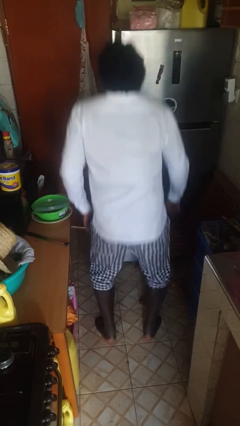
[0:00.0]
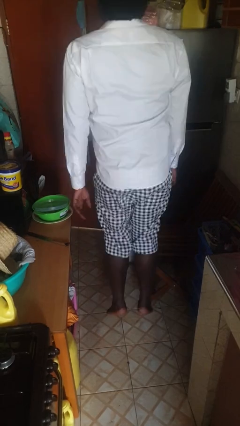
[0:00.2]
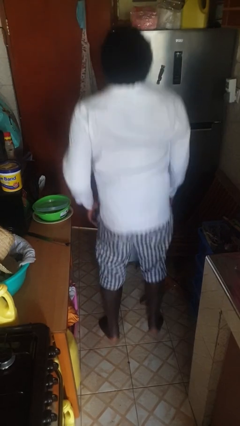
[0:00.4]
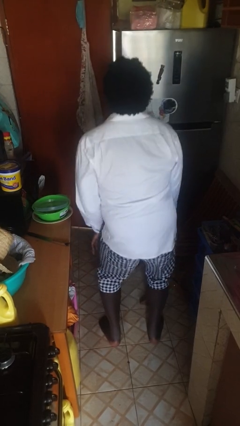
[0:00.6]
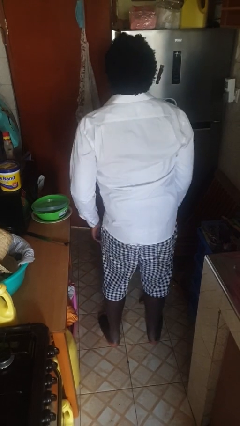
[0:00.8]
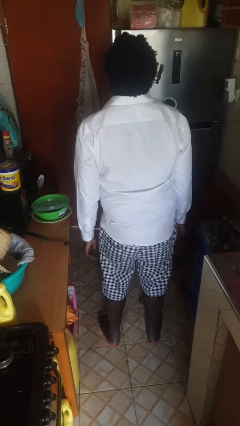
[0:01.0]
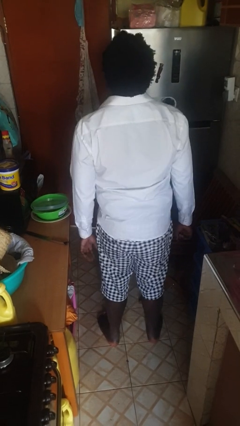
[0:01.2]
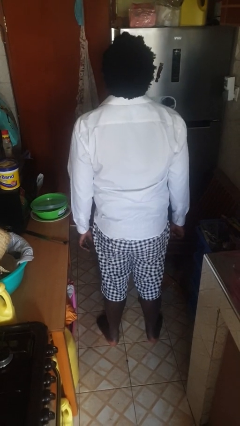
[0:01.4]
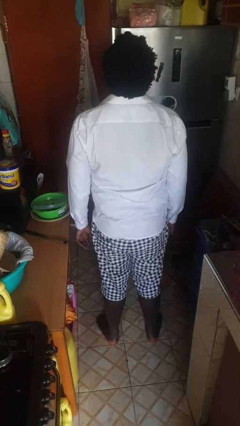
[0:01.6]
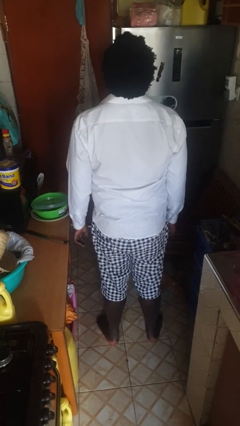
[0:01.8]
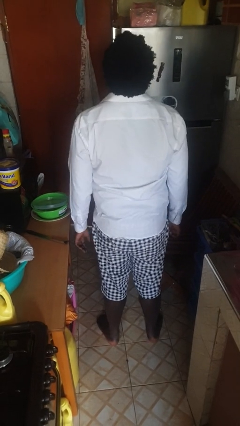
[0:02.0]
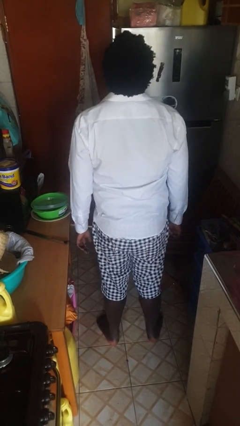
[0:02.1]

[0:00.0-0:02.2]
person jumps

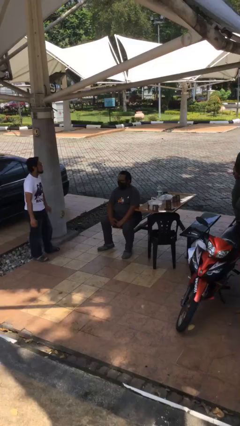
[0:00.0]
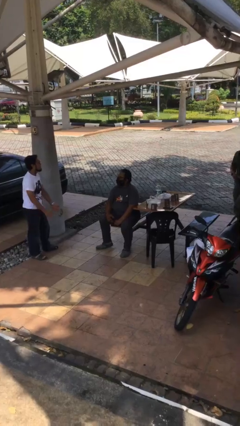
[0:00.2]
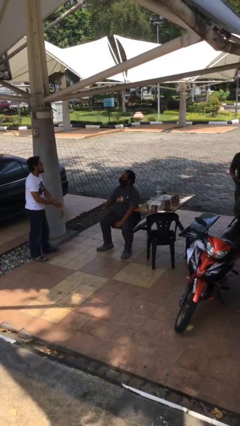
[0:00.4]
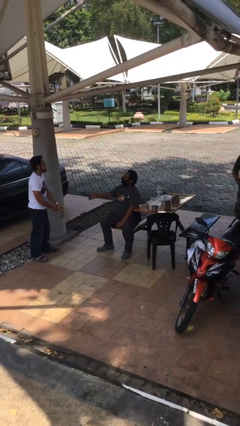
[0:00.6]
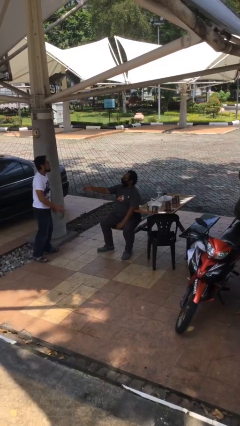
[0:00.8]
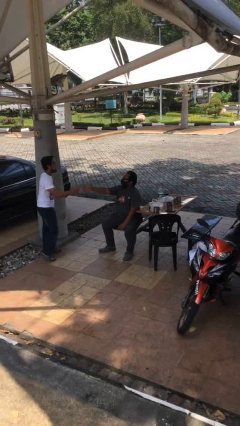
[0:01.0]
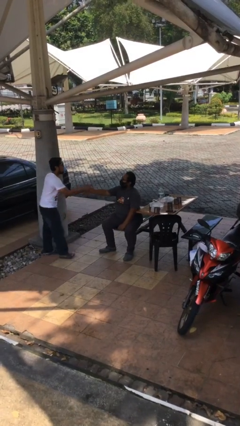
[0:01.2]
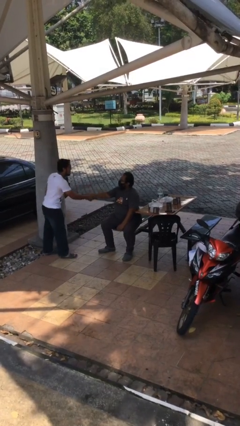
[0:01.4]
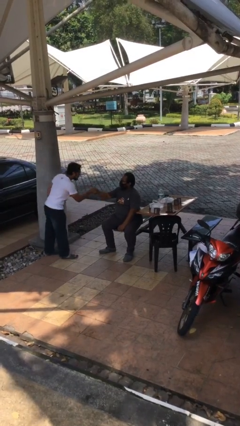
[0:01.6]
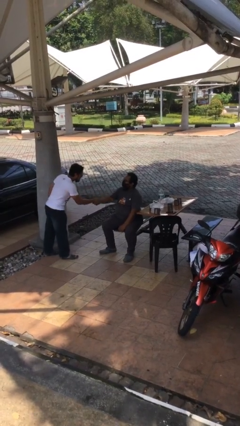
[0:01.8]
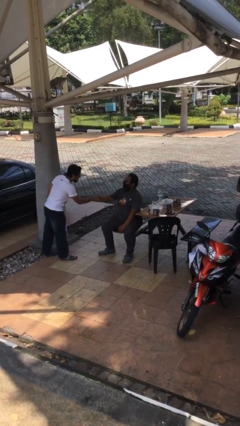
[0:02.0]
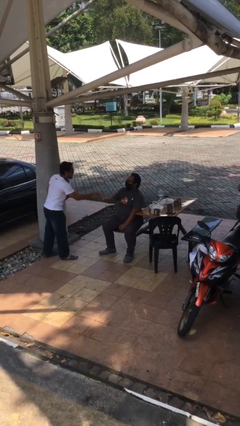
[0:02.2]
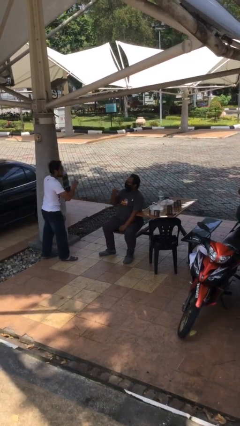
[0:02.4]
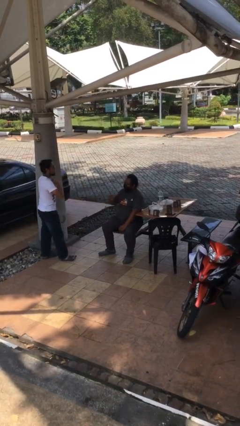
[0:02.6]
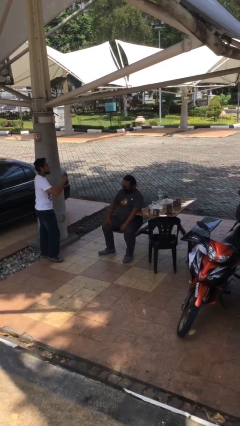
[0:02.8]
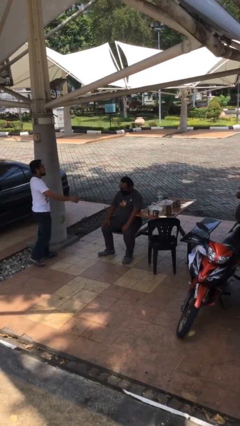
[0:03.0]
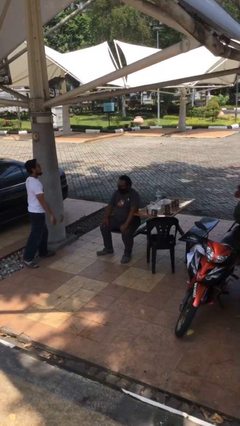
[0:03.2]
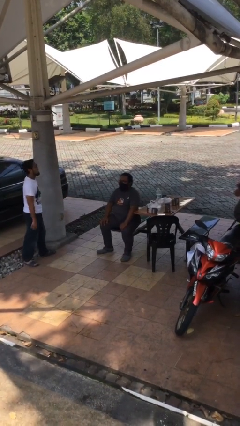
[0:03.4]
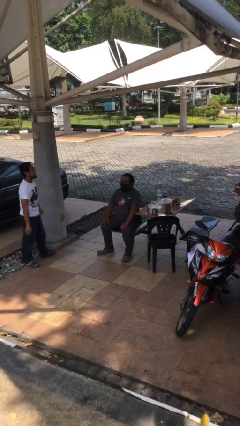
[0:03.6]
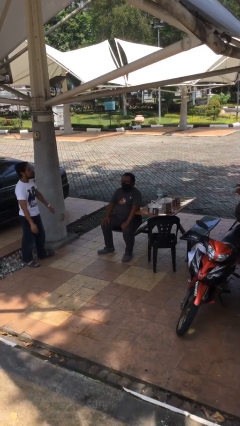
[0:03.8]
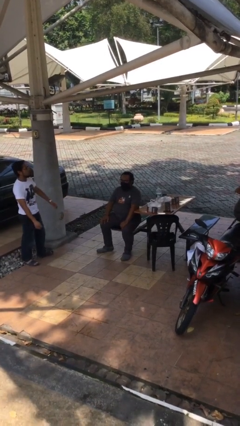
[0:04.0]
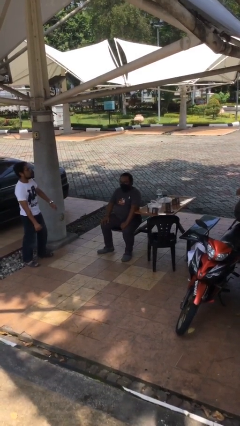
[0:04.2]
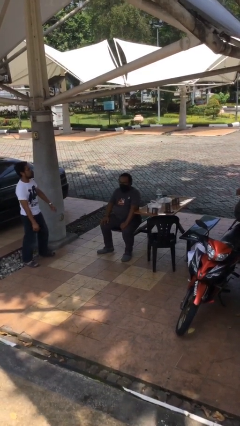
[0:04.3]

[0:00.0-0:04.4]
person shakes hand

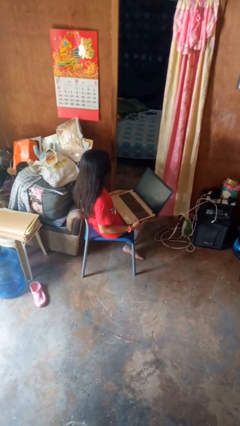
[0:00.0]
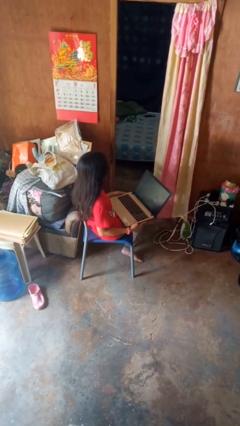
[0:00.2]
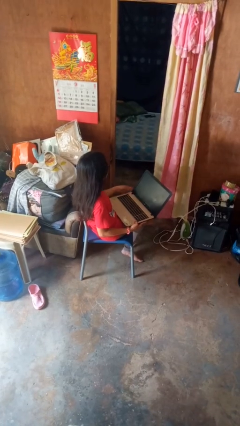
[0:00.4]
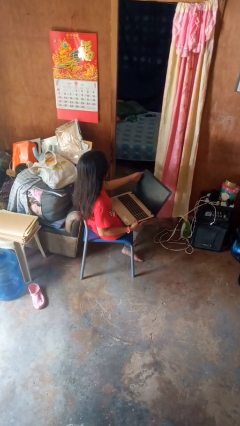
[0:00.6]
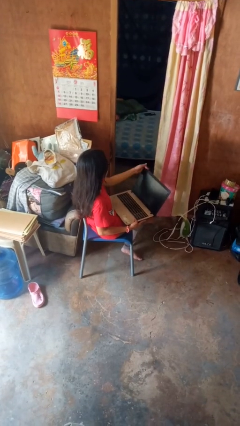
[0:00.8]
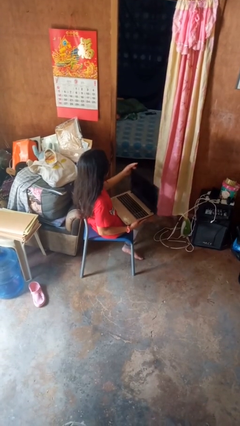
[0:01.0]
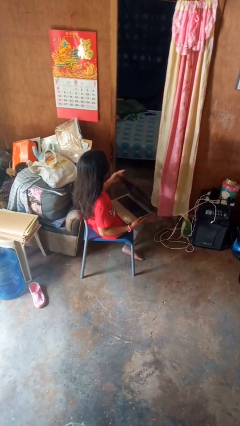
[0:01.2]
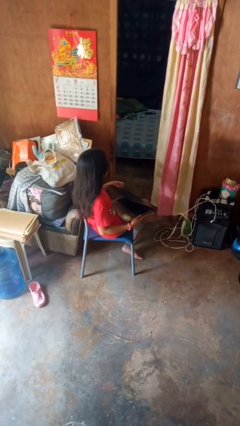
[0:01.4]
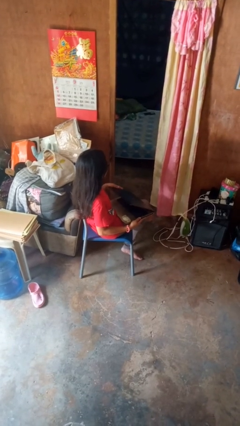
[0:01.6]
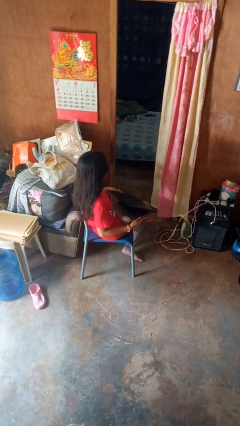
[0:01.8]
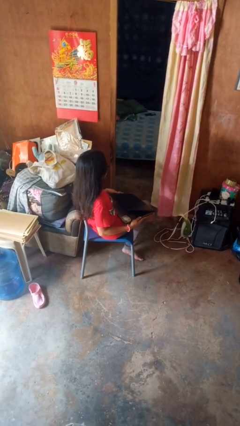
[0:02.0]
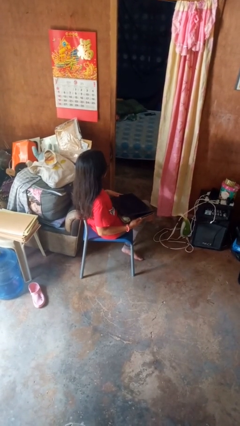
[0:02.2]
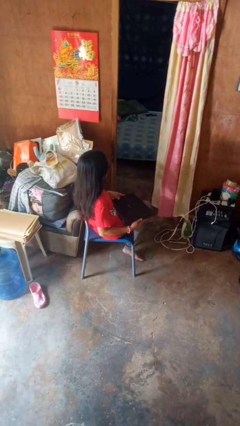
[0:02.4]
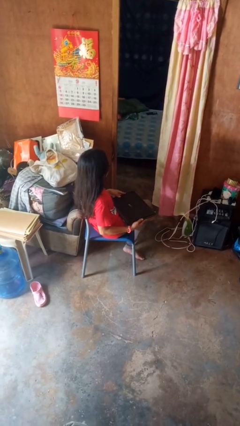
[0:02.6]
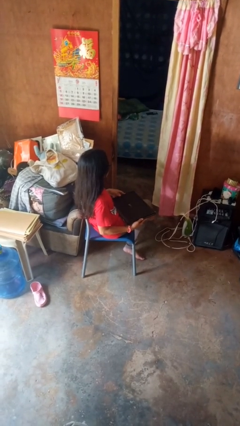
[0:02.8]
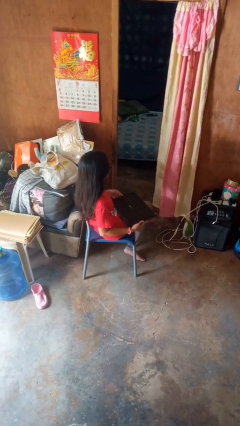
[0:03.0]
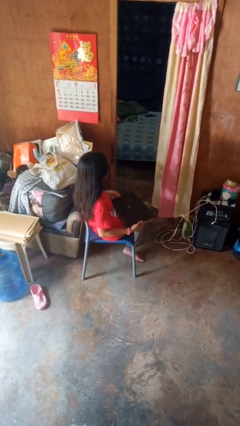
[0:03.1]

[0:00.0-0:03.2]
person closes laptop

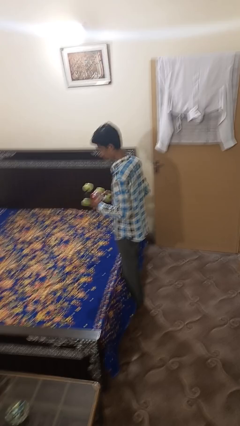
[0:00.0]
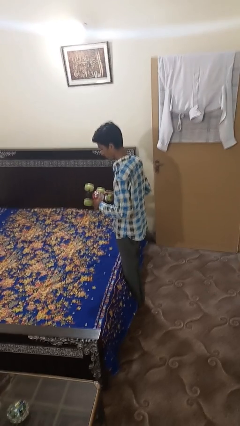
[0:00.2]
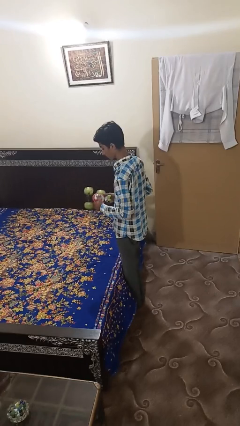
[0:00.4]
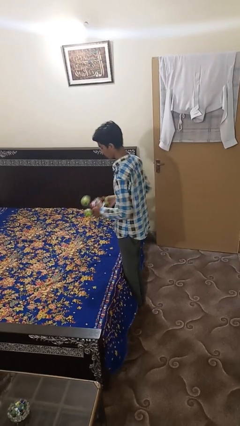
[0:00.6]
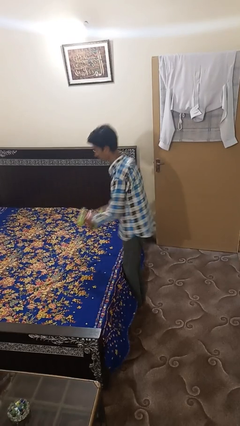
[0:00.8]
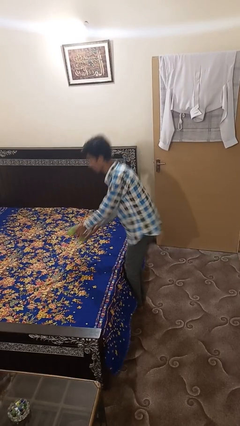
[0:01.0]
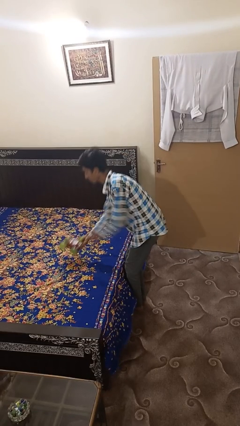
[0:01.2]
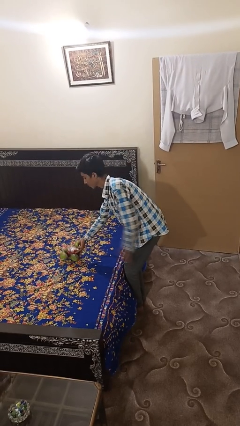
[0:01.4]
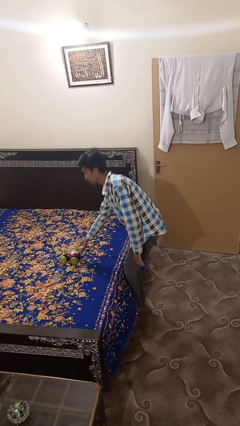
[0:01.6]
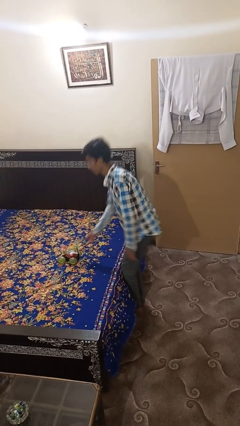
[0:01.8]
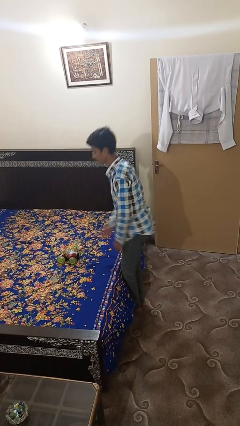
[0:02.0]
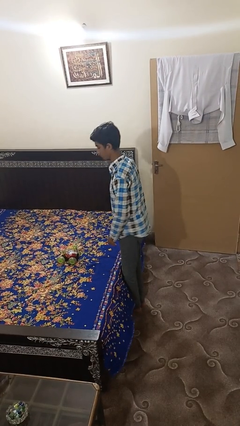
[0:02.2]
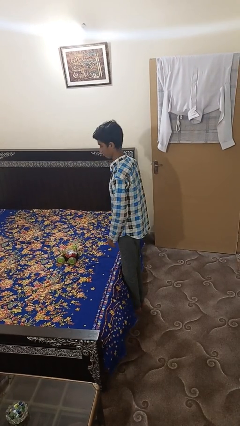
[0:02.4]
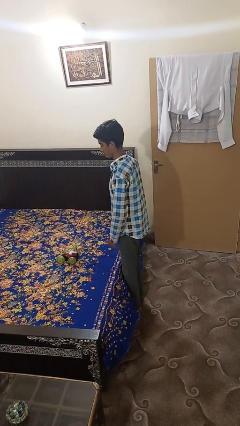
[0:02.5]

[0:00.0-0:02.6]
person puts down object on bed

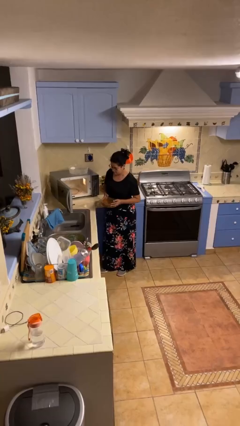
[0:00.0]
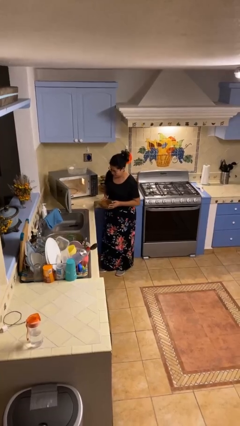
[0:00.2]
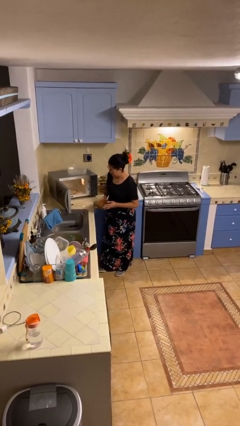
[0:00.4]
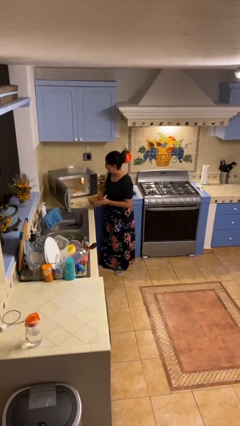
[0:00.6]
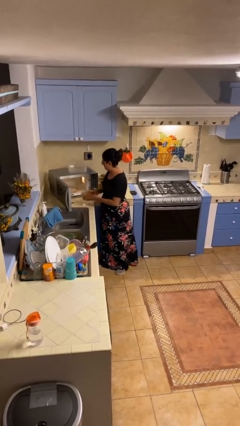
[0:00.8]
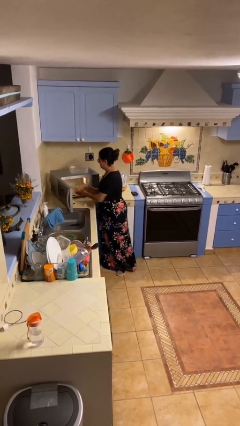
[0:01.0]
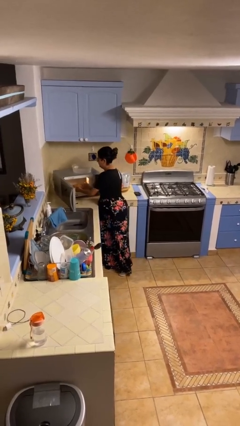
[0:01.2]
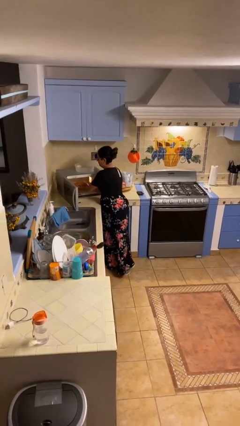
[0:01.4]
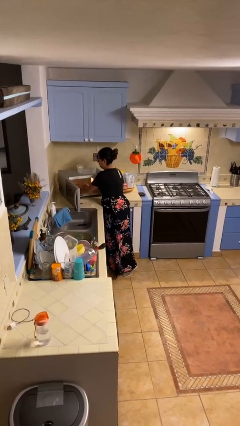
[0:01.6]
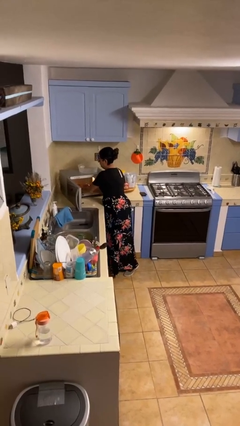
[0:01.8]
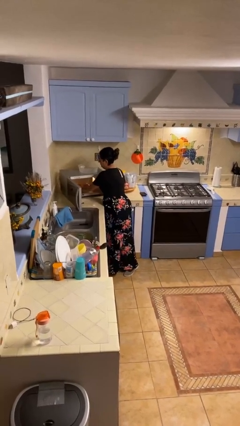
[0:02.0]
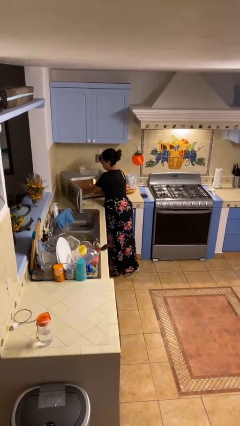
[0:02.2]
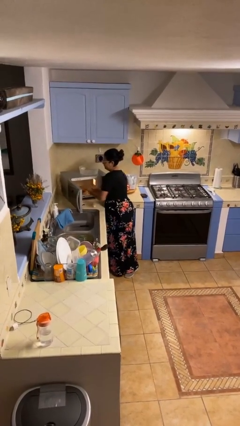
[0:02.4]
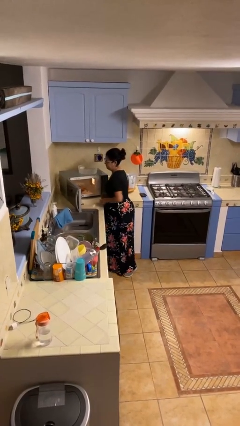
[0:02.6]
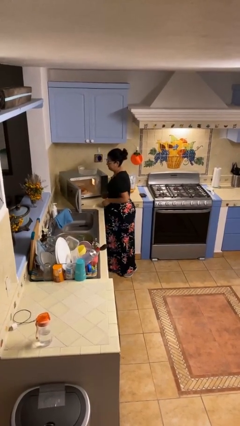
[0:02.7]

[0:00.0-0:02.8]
person puts object into microwave

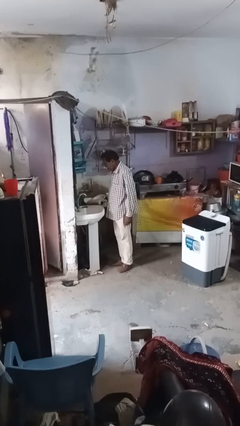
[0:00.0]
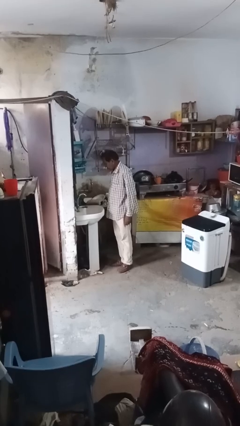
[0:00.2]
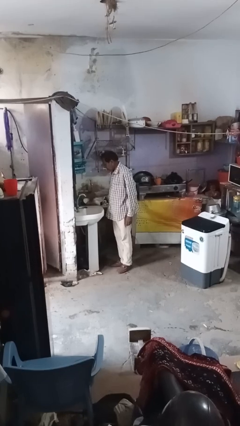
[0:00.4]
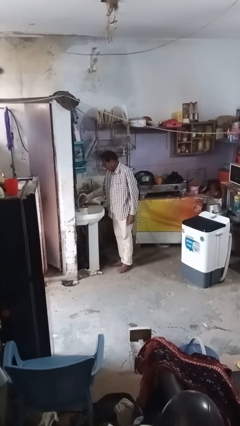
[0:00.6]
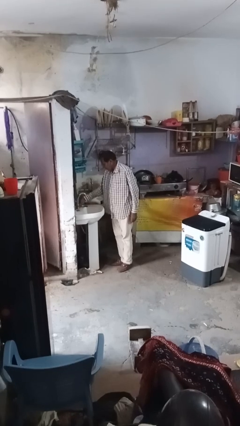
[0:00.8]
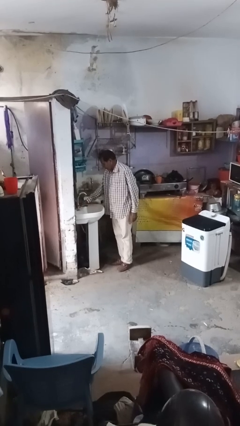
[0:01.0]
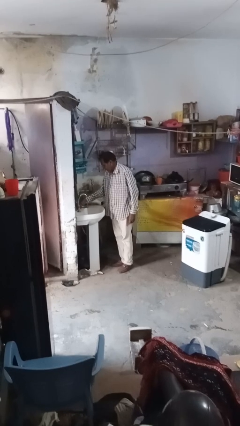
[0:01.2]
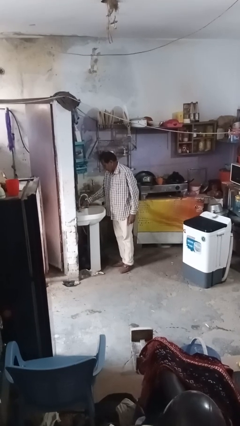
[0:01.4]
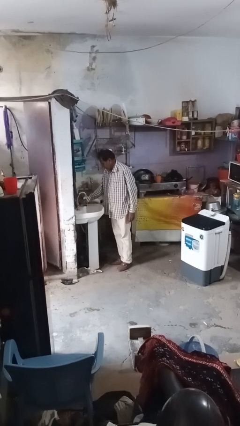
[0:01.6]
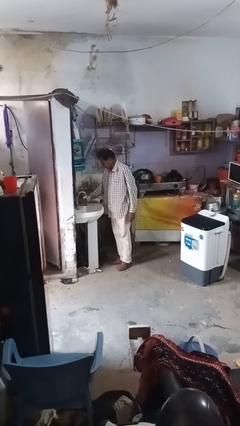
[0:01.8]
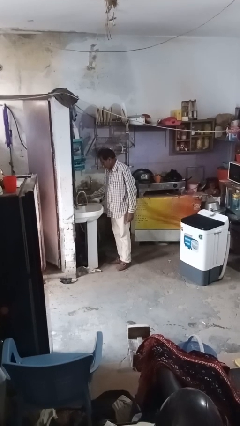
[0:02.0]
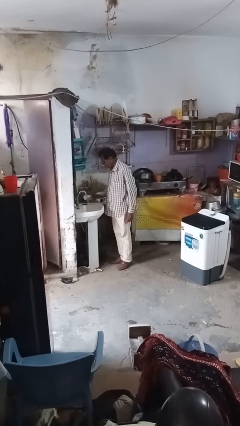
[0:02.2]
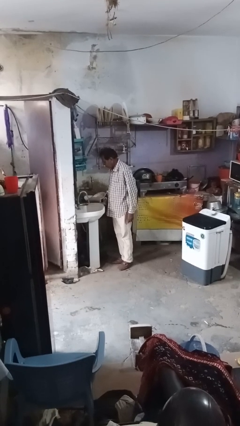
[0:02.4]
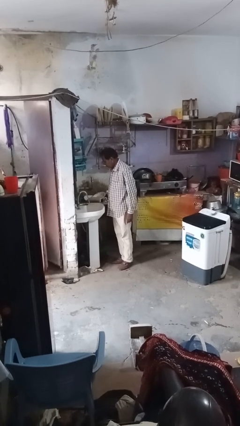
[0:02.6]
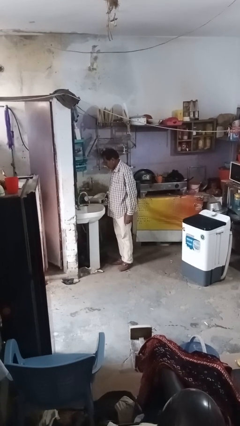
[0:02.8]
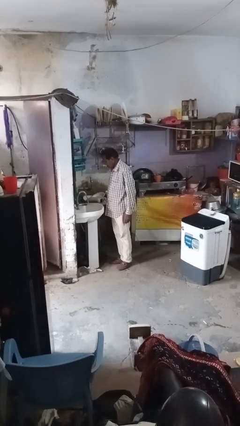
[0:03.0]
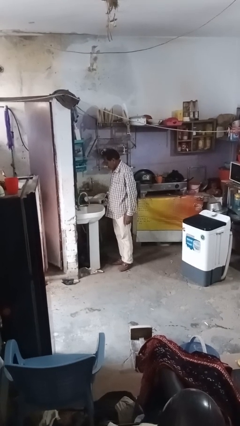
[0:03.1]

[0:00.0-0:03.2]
person turns on faucet
